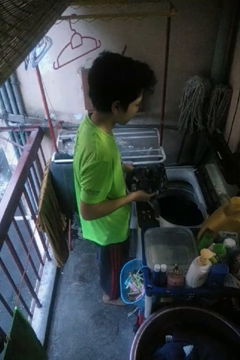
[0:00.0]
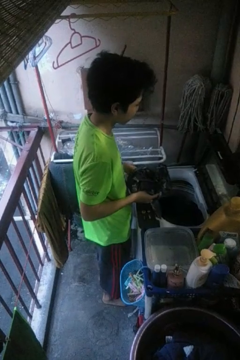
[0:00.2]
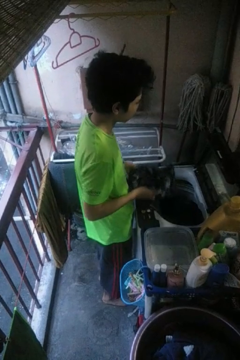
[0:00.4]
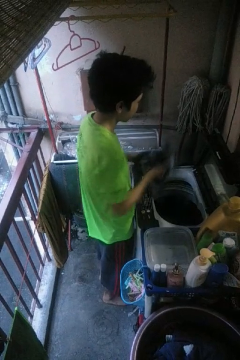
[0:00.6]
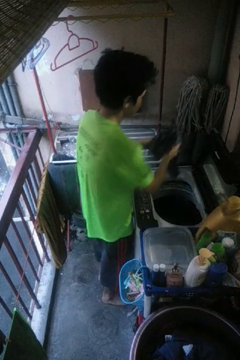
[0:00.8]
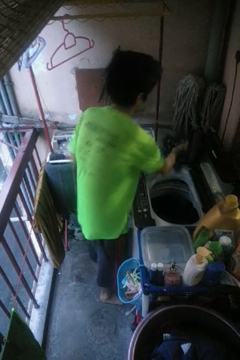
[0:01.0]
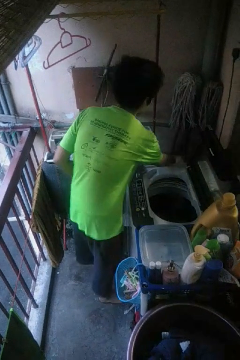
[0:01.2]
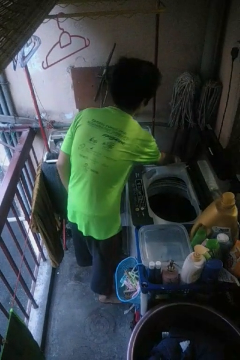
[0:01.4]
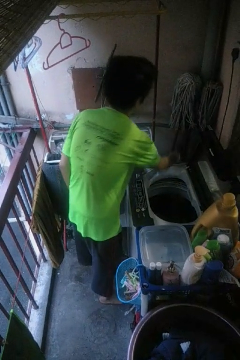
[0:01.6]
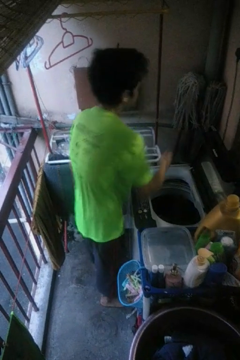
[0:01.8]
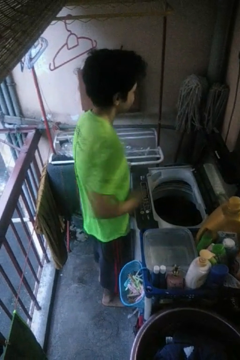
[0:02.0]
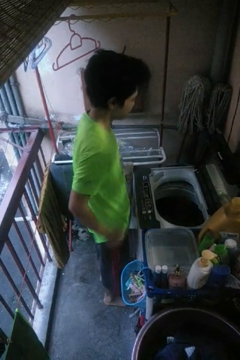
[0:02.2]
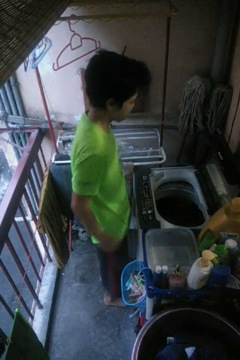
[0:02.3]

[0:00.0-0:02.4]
person loads dryer

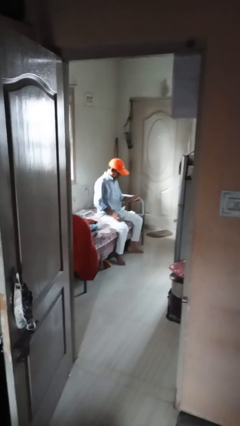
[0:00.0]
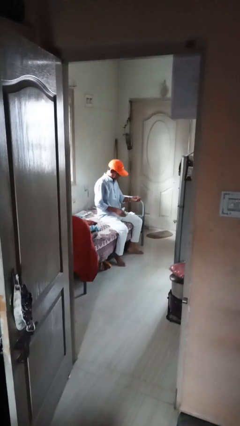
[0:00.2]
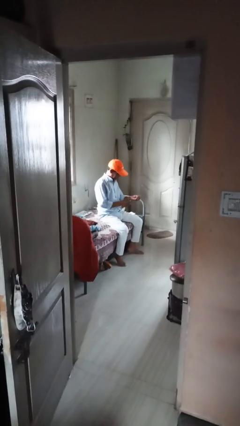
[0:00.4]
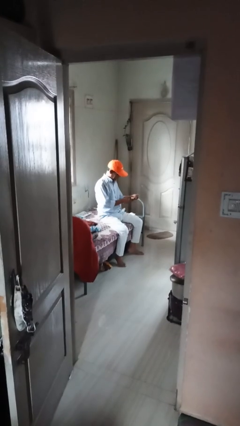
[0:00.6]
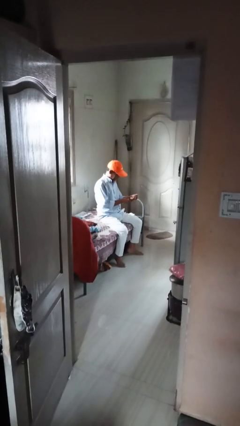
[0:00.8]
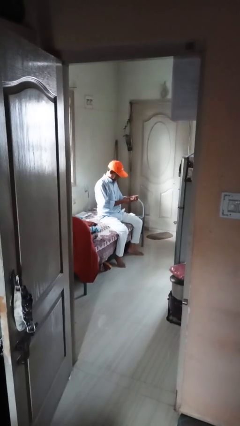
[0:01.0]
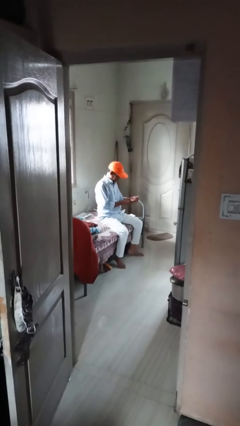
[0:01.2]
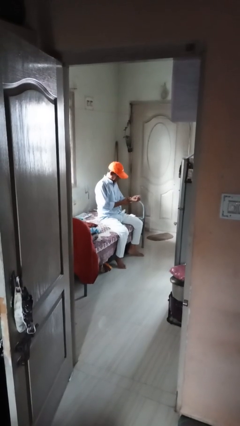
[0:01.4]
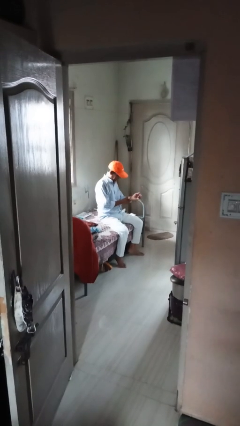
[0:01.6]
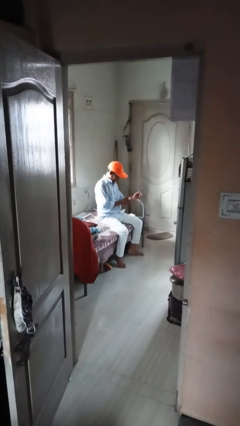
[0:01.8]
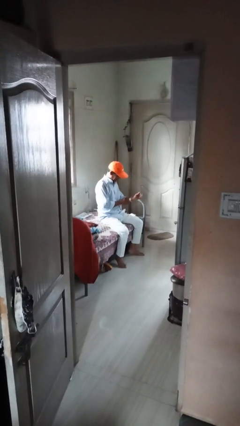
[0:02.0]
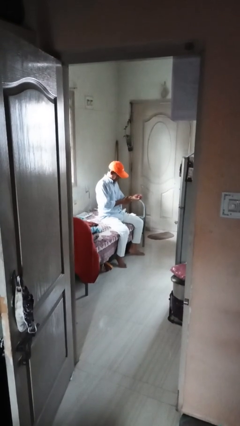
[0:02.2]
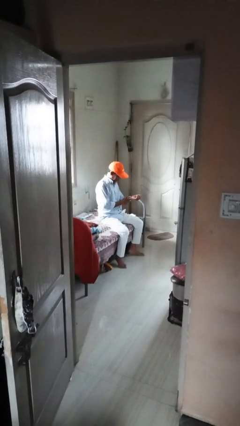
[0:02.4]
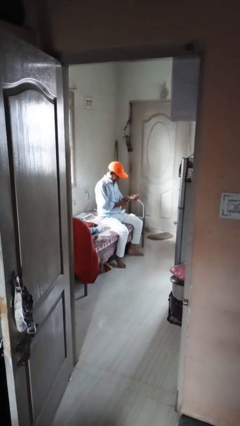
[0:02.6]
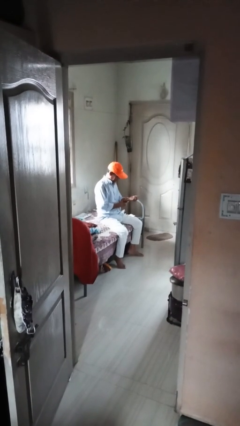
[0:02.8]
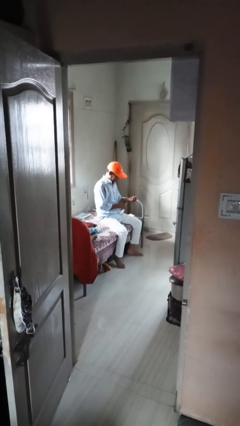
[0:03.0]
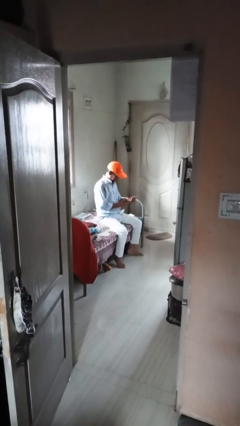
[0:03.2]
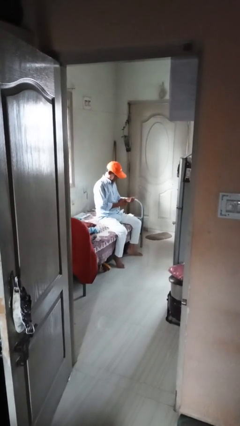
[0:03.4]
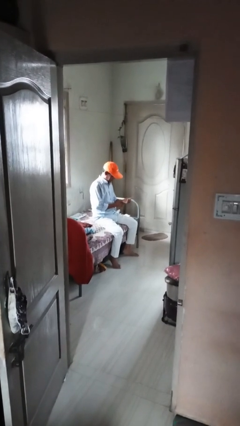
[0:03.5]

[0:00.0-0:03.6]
person looks at hands in lap

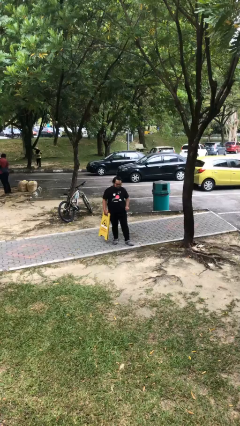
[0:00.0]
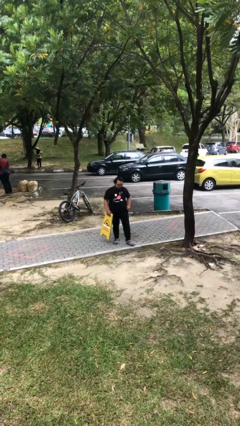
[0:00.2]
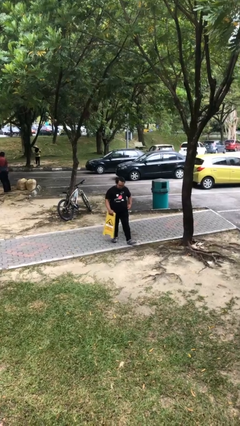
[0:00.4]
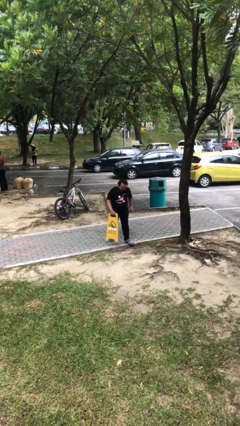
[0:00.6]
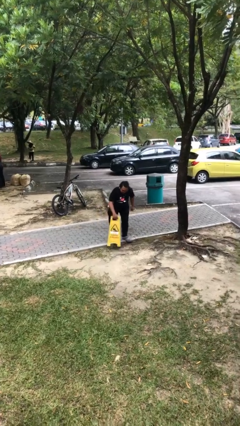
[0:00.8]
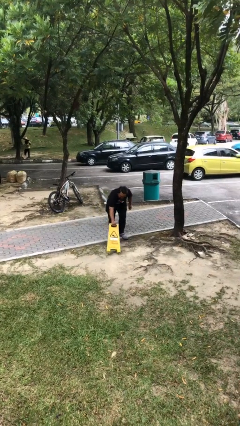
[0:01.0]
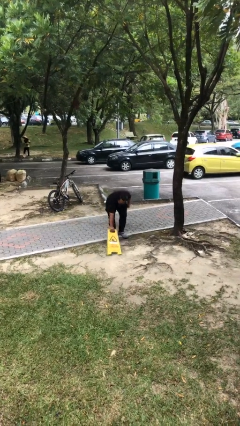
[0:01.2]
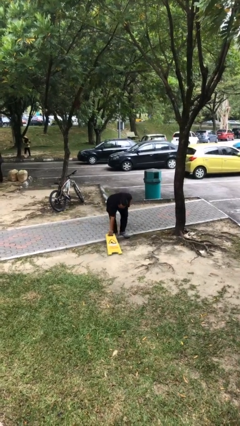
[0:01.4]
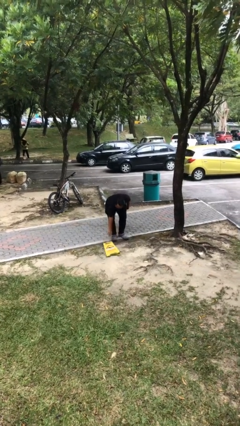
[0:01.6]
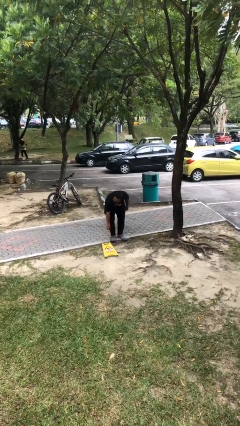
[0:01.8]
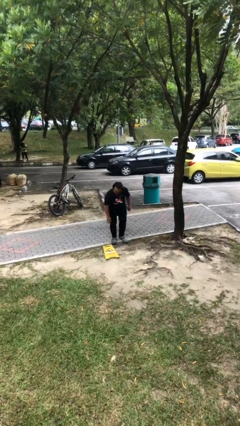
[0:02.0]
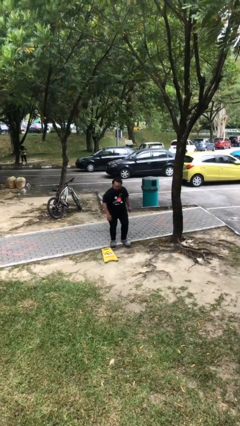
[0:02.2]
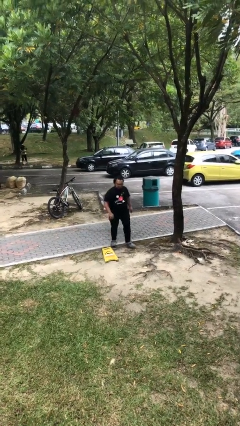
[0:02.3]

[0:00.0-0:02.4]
person puts down object on floor

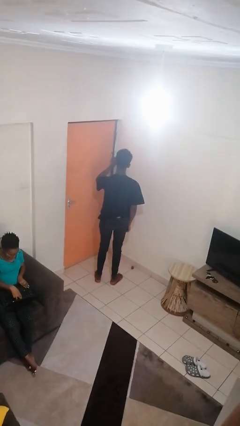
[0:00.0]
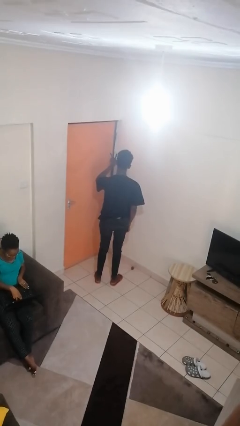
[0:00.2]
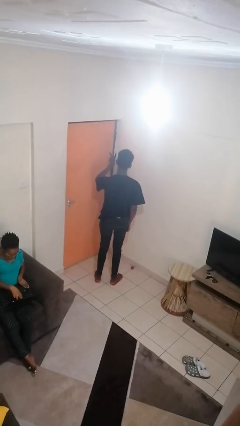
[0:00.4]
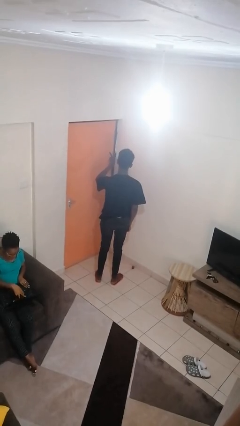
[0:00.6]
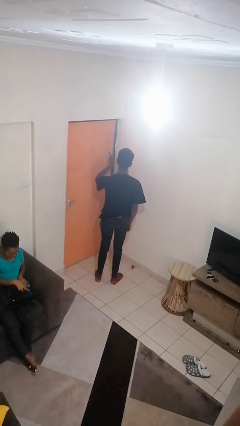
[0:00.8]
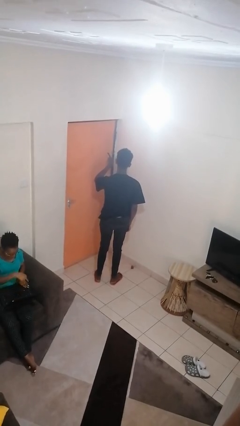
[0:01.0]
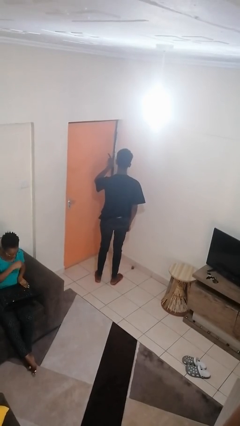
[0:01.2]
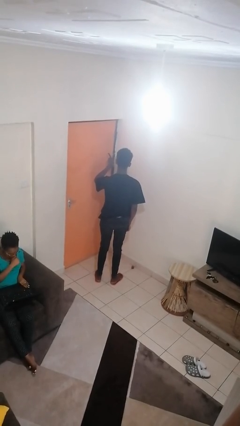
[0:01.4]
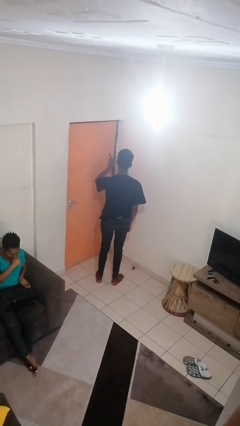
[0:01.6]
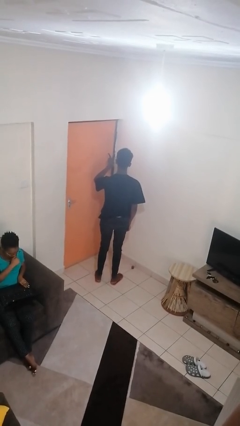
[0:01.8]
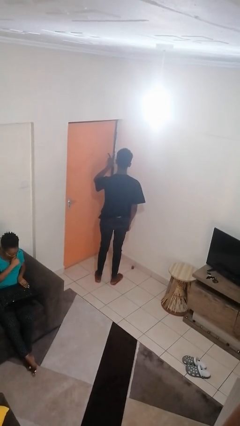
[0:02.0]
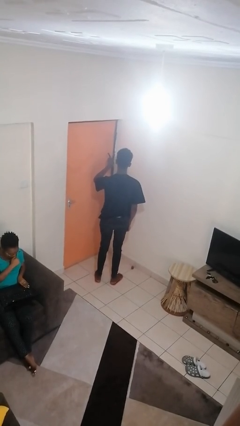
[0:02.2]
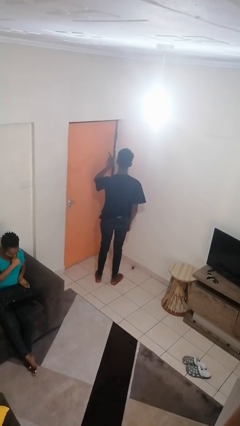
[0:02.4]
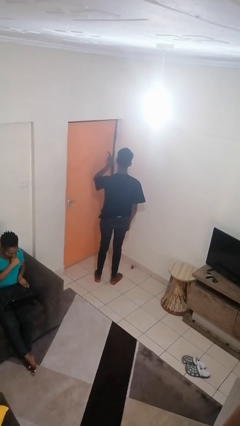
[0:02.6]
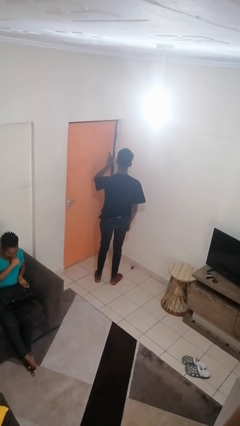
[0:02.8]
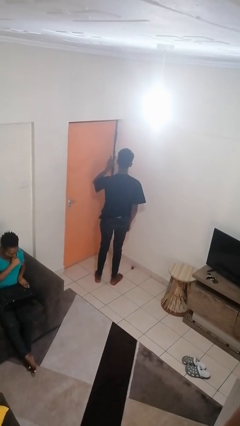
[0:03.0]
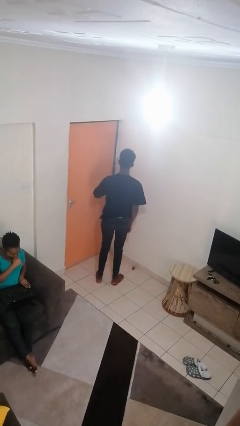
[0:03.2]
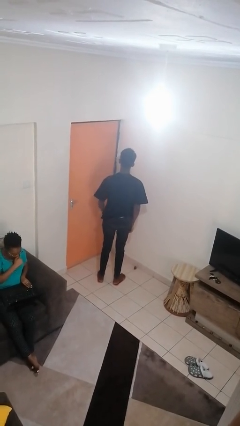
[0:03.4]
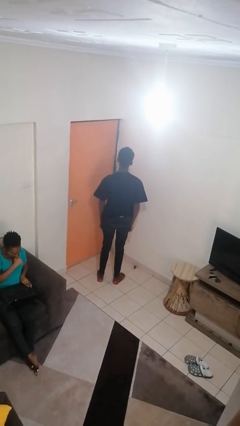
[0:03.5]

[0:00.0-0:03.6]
person gestures peace

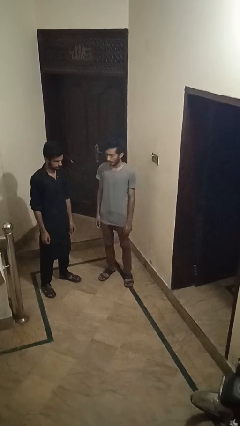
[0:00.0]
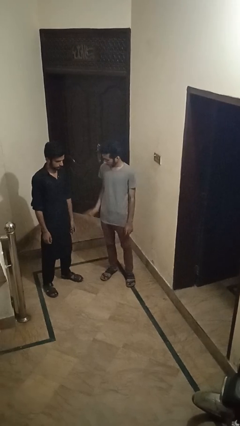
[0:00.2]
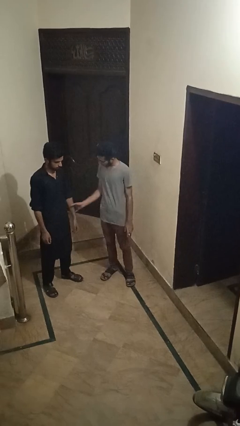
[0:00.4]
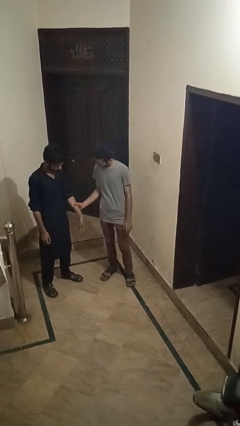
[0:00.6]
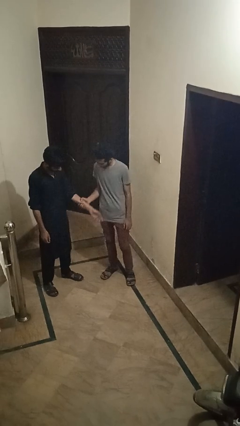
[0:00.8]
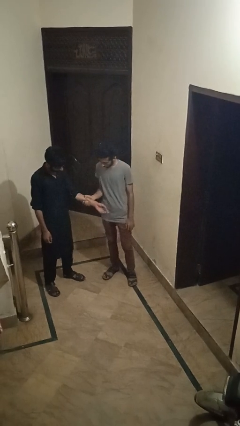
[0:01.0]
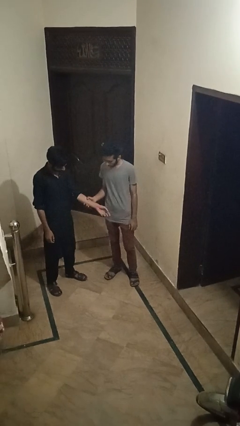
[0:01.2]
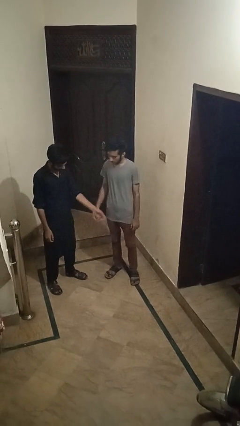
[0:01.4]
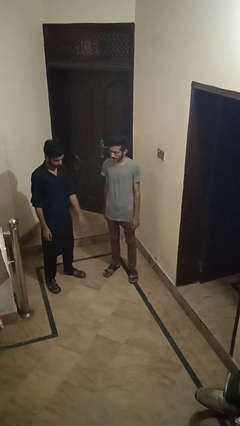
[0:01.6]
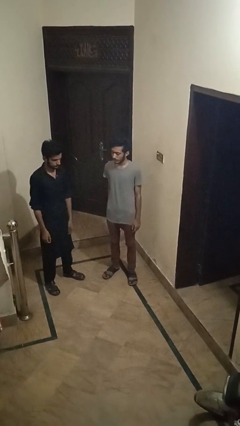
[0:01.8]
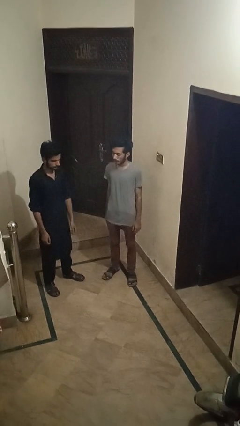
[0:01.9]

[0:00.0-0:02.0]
person grabs person by forearm

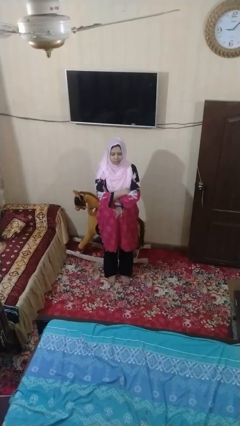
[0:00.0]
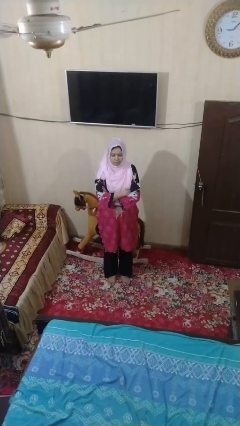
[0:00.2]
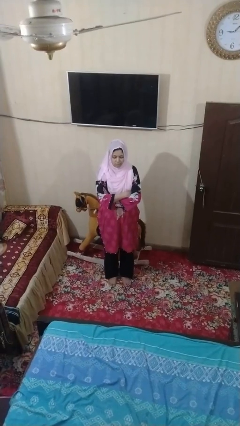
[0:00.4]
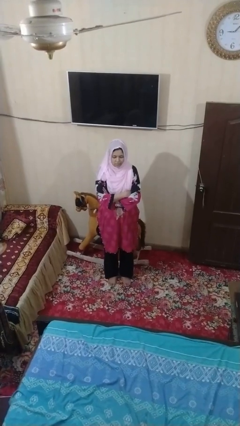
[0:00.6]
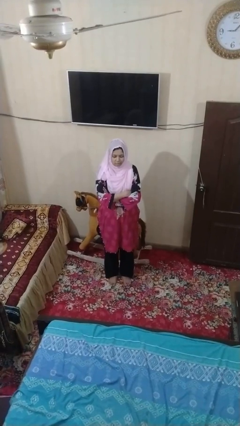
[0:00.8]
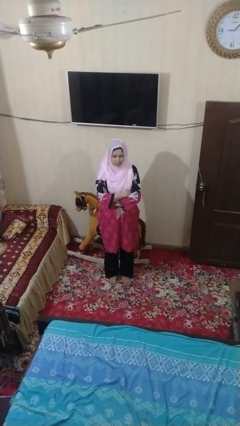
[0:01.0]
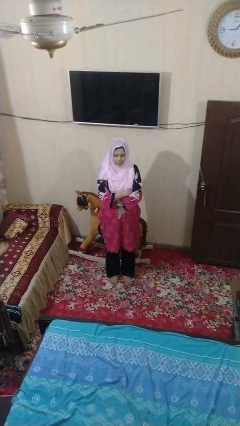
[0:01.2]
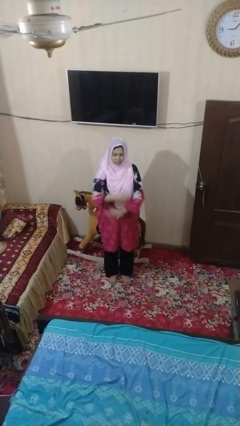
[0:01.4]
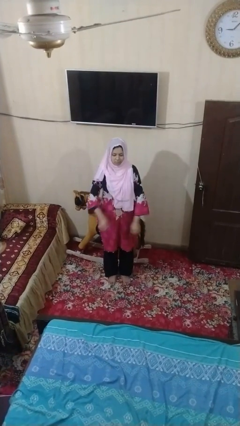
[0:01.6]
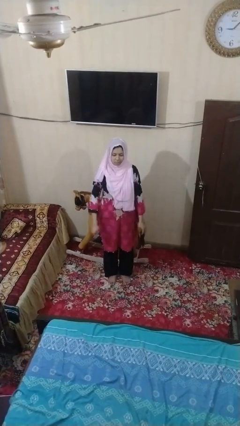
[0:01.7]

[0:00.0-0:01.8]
person crosses arms

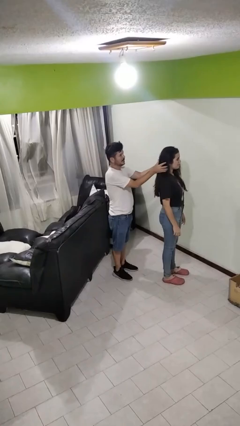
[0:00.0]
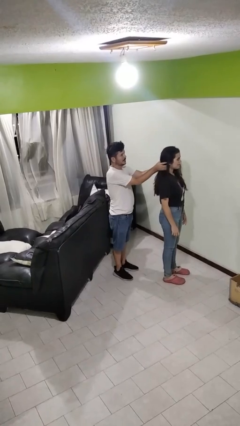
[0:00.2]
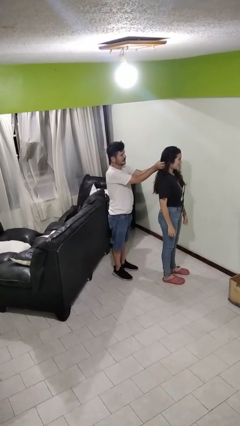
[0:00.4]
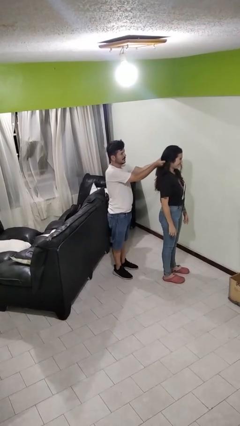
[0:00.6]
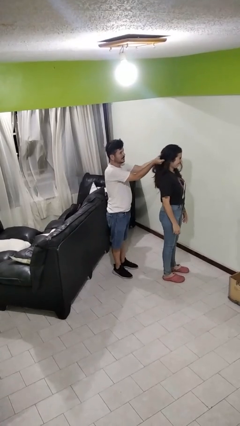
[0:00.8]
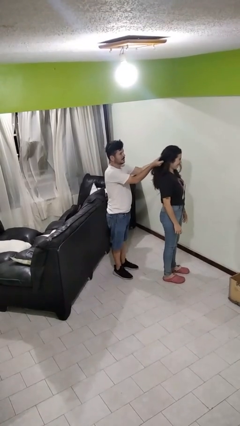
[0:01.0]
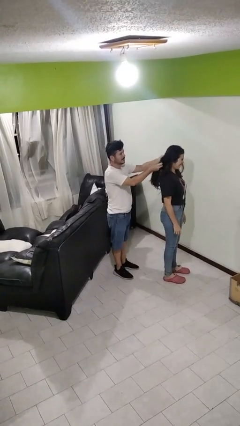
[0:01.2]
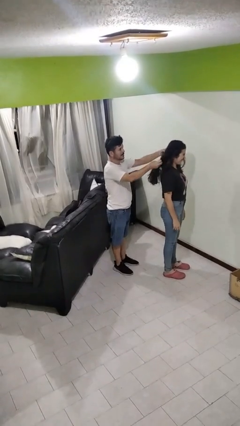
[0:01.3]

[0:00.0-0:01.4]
person grabs person by hair
